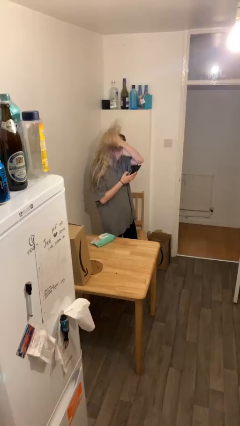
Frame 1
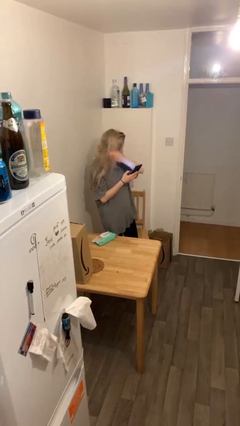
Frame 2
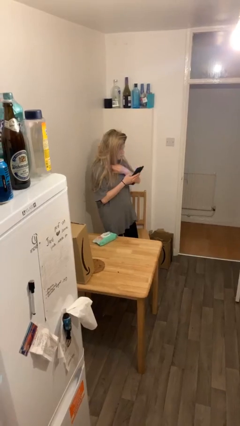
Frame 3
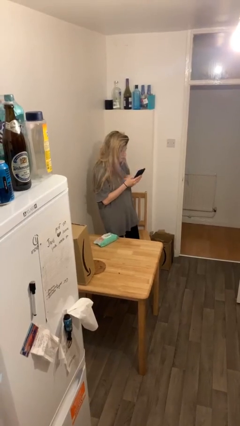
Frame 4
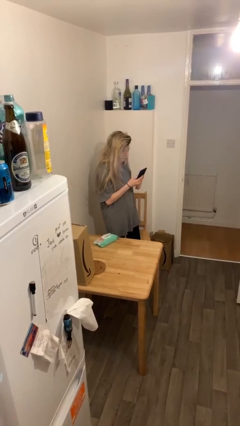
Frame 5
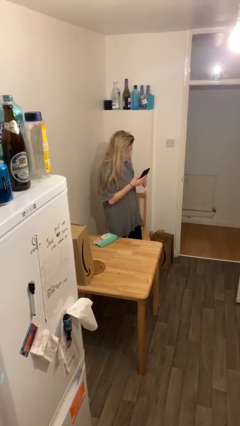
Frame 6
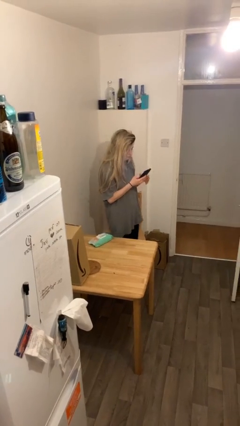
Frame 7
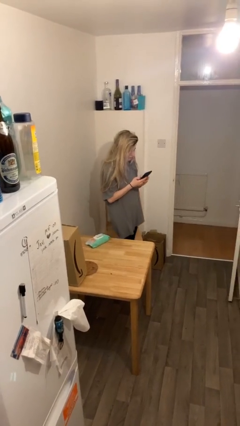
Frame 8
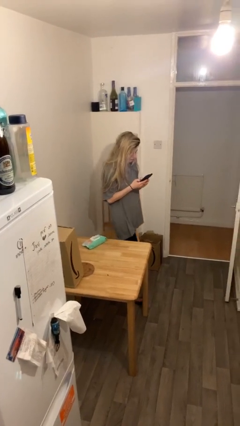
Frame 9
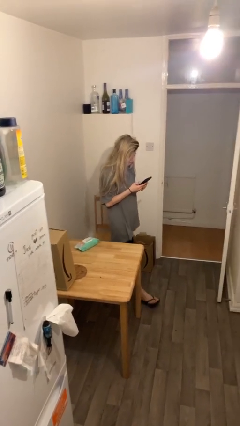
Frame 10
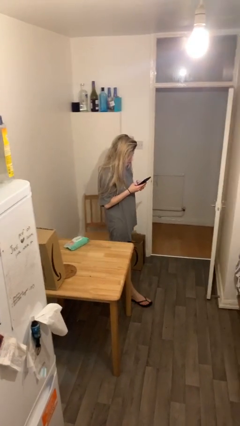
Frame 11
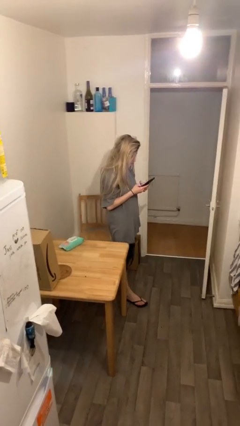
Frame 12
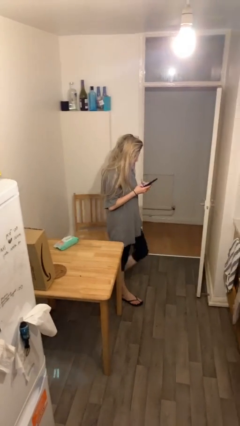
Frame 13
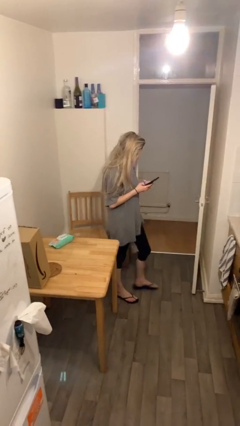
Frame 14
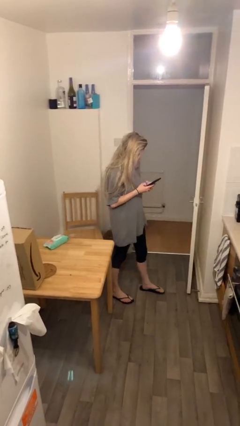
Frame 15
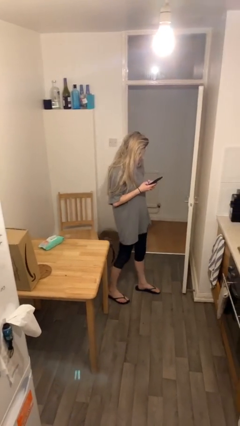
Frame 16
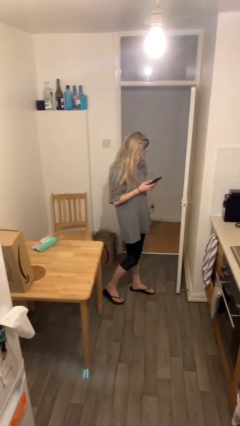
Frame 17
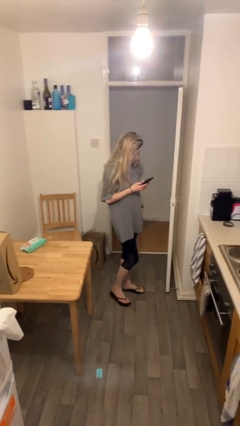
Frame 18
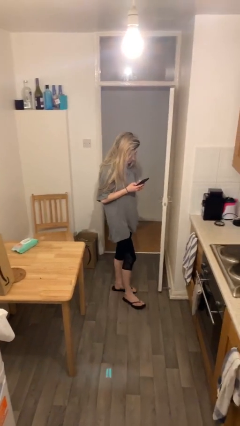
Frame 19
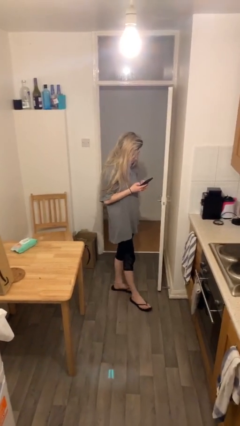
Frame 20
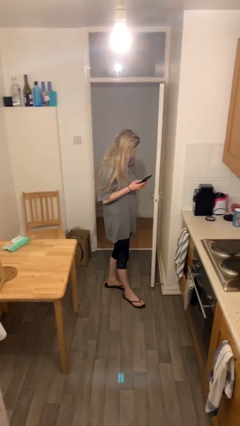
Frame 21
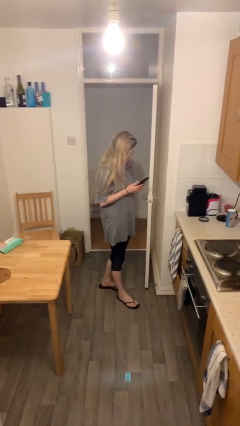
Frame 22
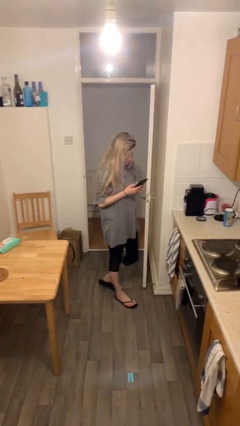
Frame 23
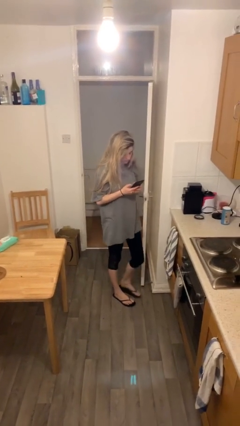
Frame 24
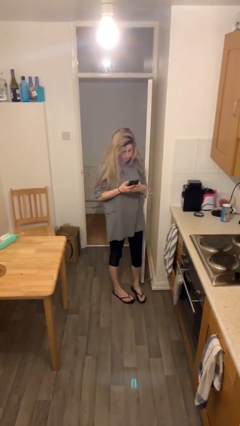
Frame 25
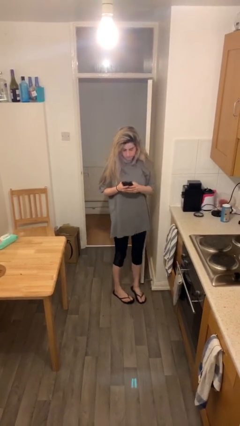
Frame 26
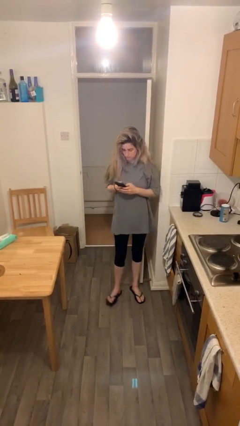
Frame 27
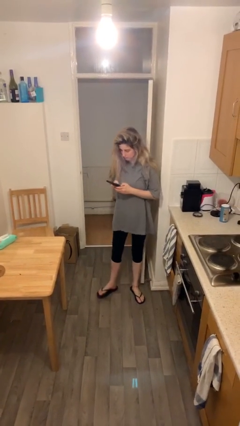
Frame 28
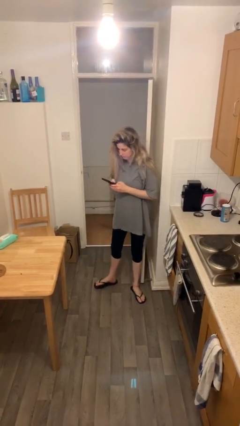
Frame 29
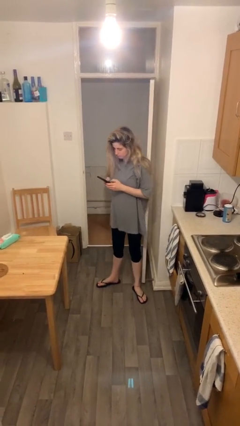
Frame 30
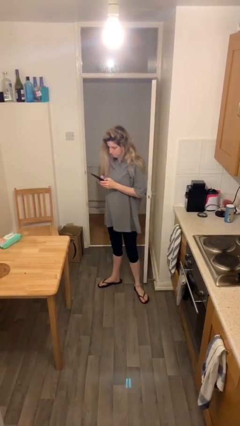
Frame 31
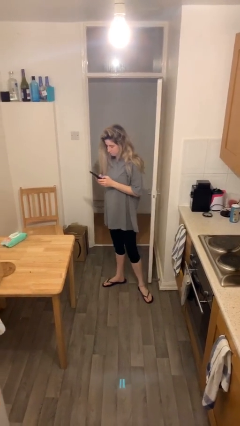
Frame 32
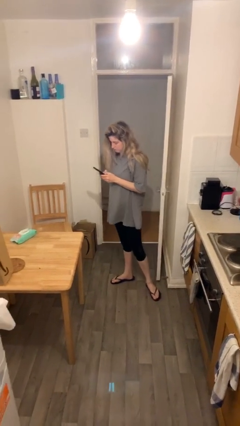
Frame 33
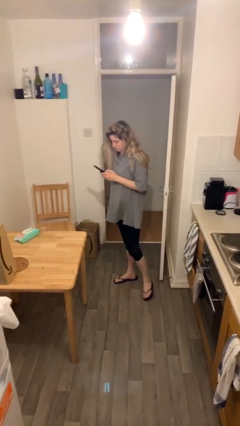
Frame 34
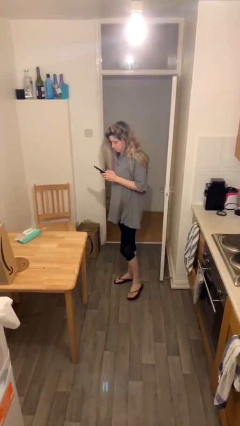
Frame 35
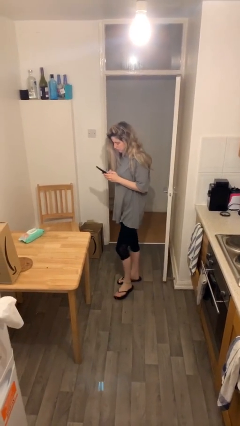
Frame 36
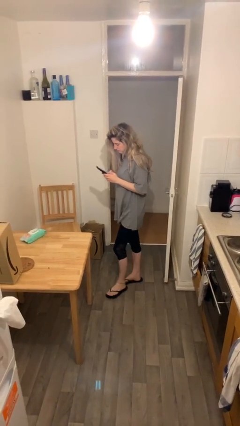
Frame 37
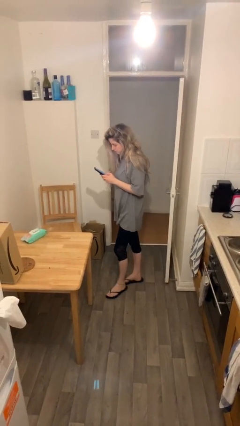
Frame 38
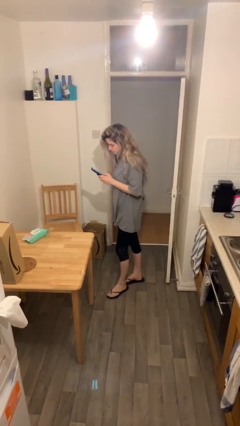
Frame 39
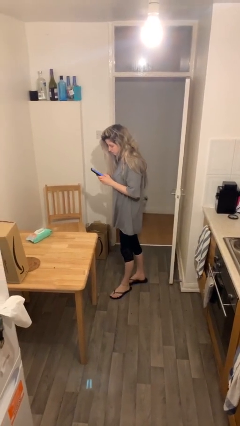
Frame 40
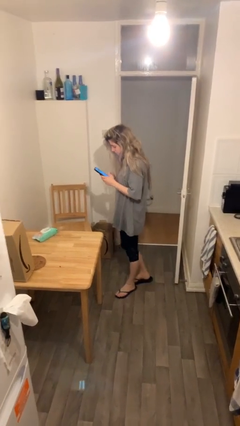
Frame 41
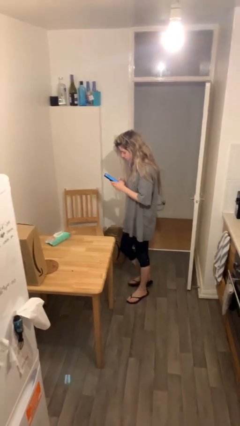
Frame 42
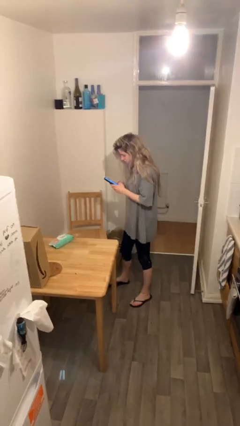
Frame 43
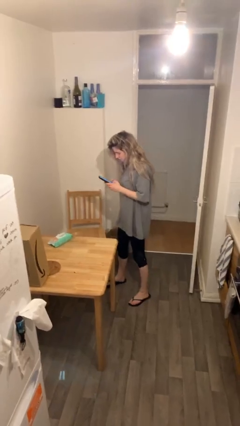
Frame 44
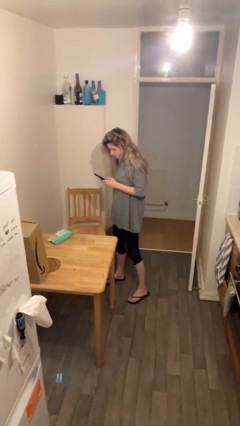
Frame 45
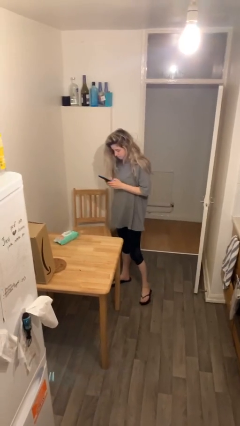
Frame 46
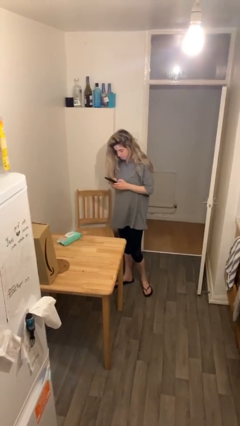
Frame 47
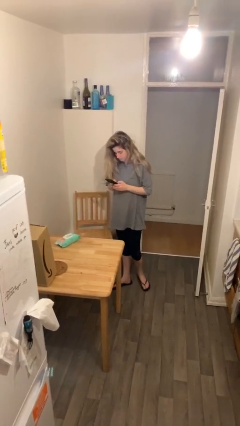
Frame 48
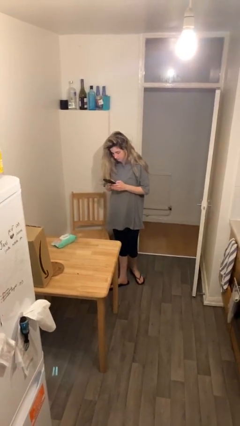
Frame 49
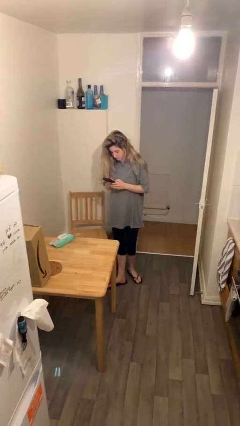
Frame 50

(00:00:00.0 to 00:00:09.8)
person texts on phone

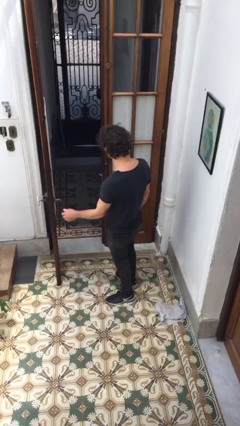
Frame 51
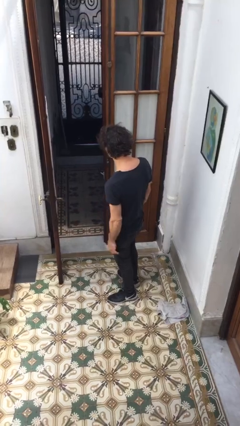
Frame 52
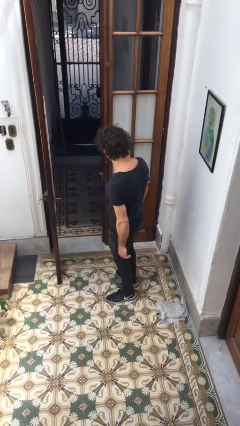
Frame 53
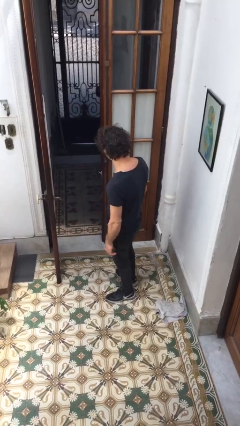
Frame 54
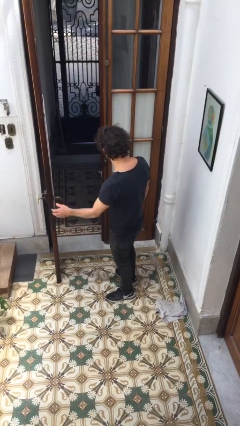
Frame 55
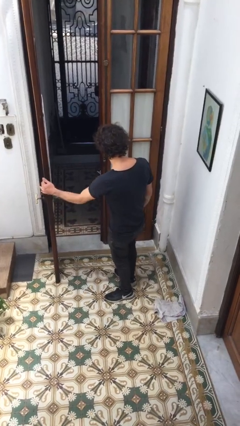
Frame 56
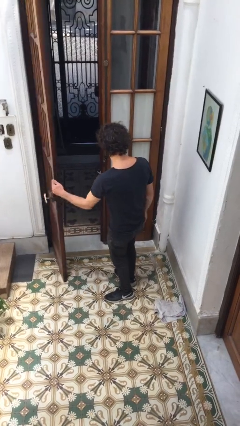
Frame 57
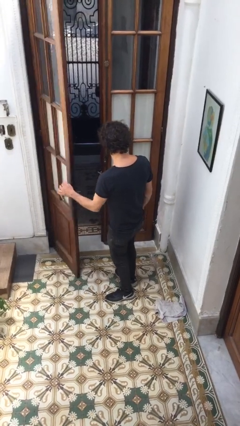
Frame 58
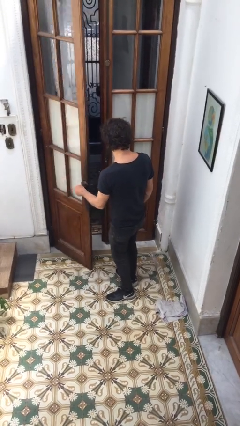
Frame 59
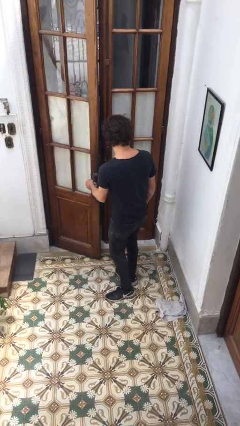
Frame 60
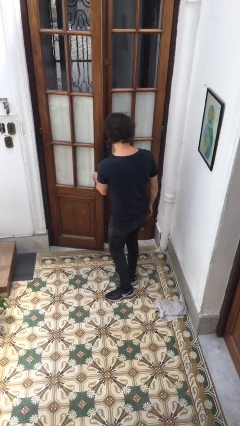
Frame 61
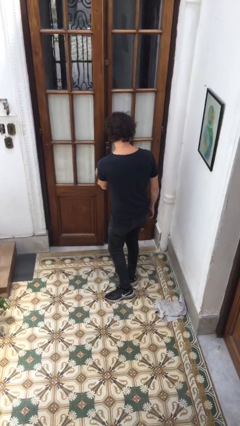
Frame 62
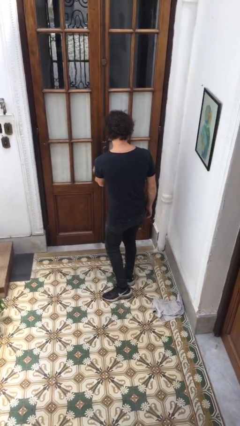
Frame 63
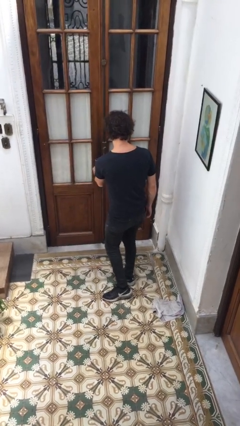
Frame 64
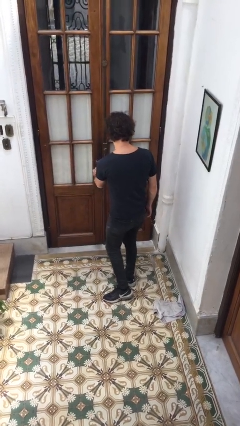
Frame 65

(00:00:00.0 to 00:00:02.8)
person closes facility door

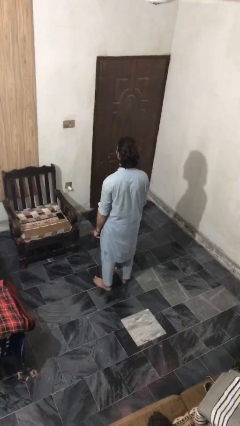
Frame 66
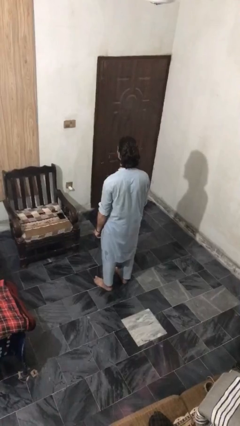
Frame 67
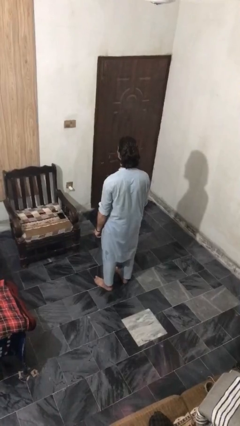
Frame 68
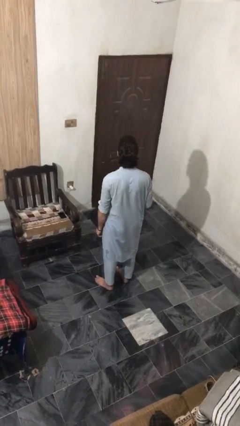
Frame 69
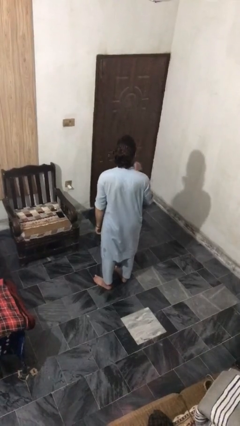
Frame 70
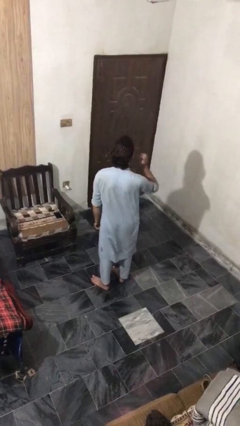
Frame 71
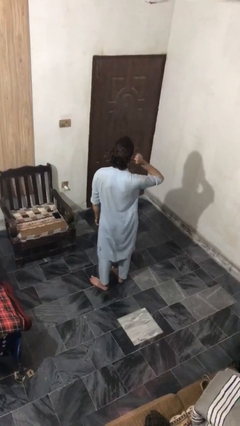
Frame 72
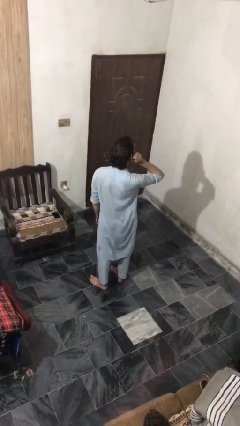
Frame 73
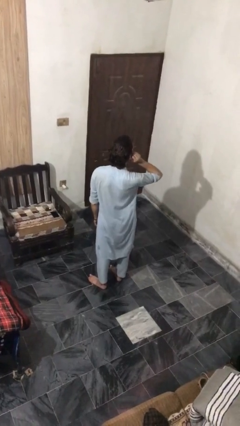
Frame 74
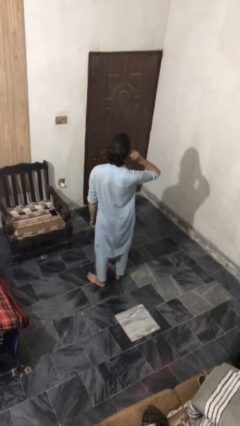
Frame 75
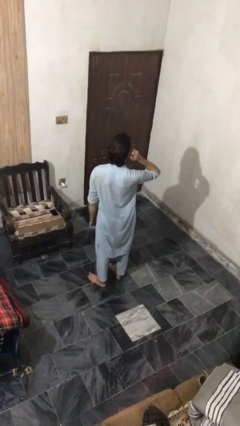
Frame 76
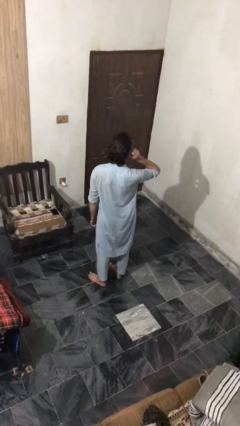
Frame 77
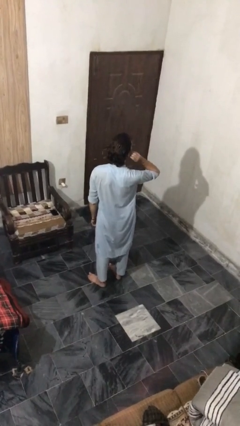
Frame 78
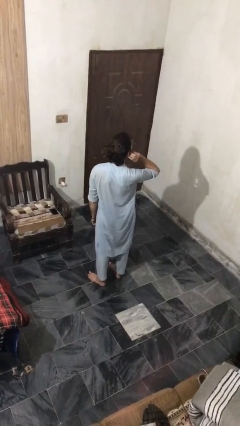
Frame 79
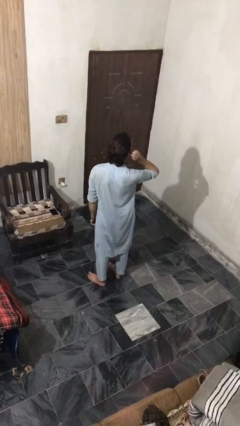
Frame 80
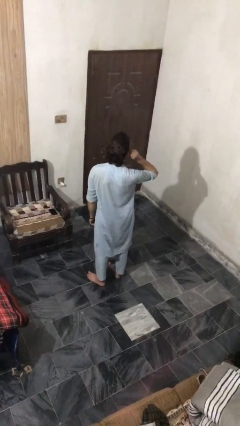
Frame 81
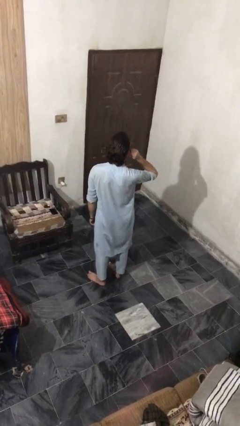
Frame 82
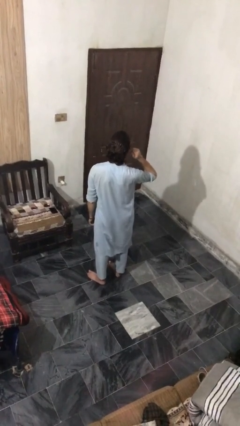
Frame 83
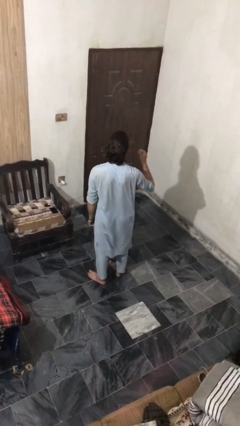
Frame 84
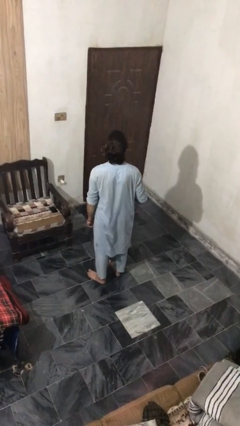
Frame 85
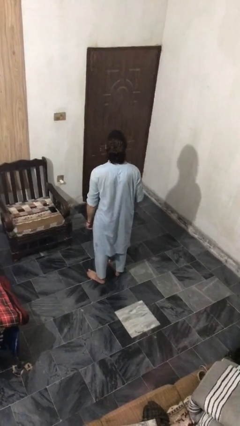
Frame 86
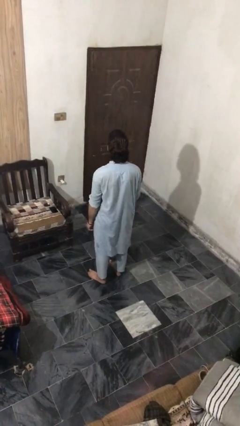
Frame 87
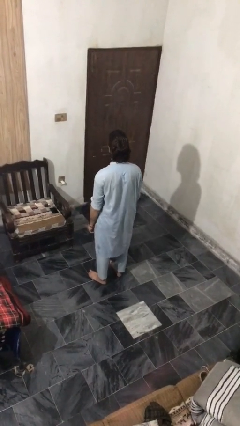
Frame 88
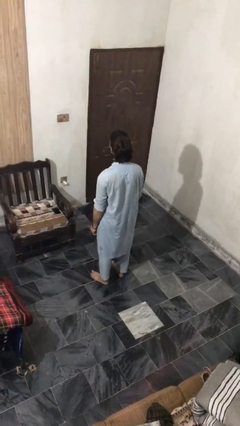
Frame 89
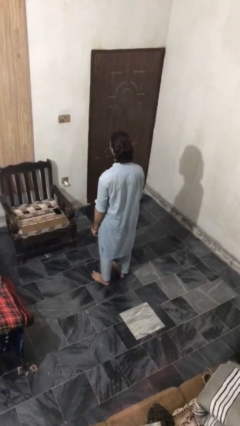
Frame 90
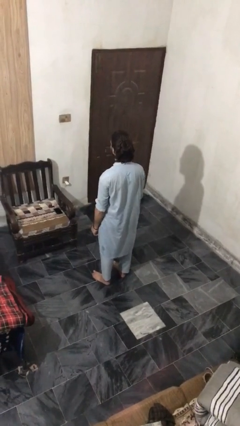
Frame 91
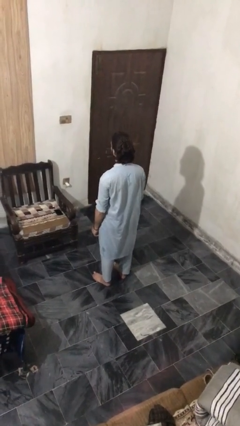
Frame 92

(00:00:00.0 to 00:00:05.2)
person touches earlobe

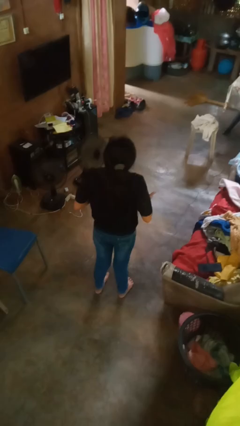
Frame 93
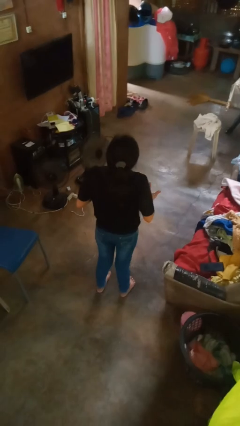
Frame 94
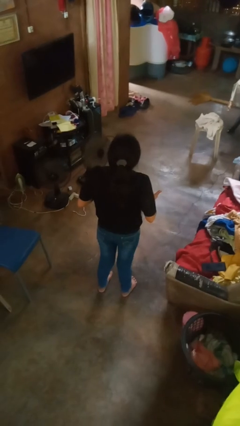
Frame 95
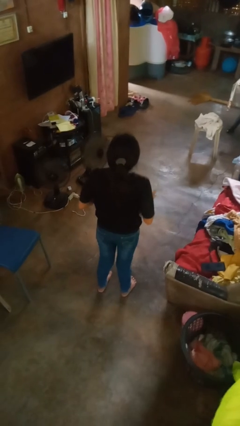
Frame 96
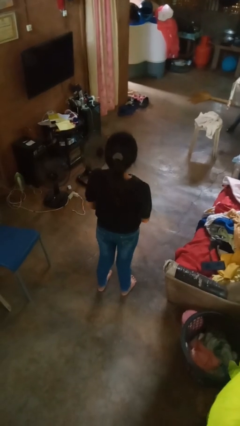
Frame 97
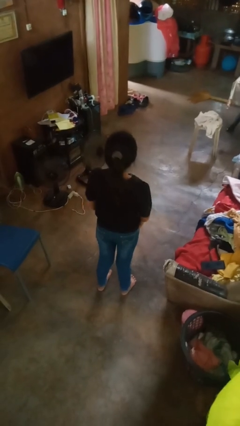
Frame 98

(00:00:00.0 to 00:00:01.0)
person shrugs
